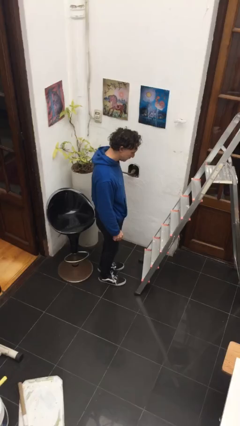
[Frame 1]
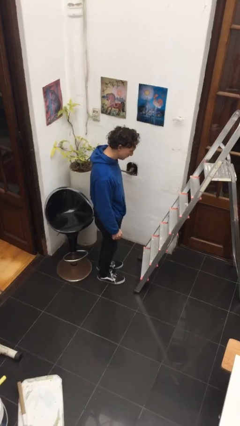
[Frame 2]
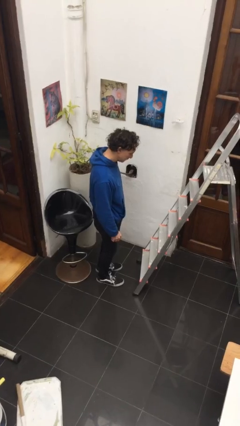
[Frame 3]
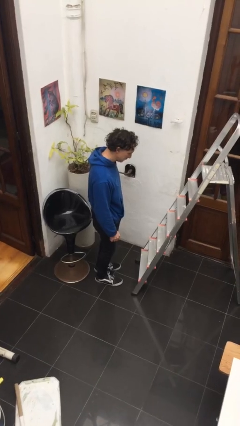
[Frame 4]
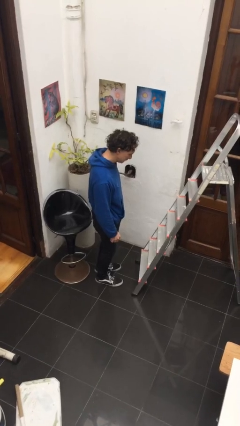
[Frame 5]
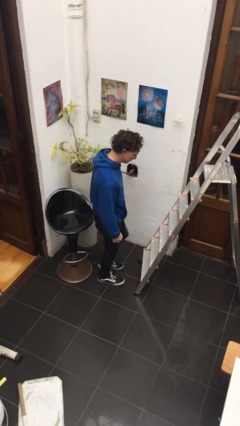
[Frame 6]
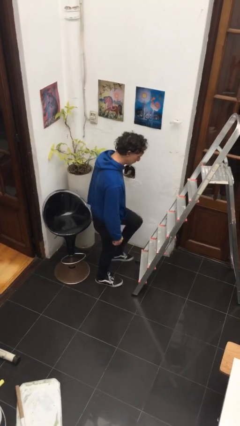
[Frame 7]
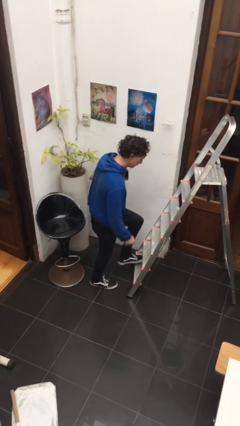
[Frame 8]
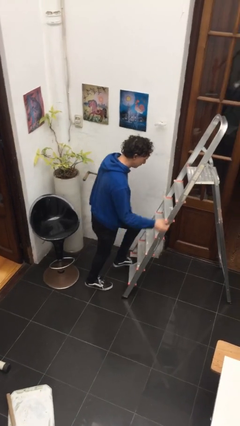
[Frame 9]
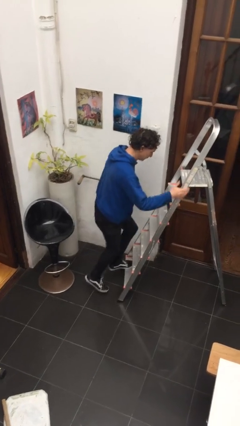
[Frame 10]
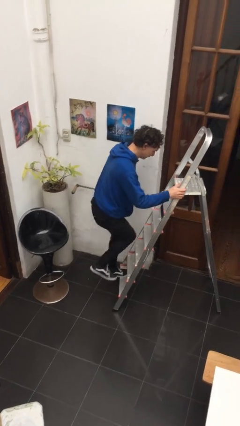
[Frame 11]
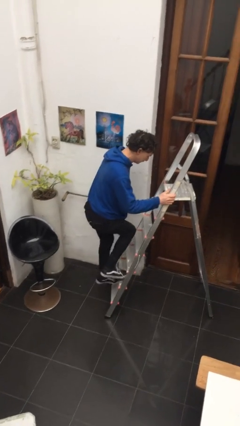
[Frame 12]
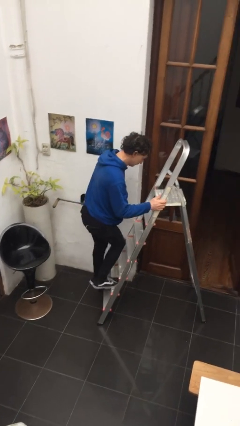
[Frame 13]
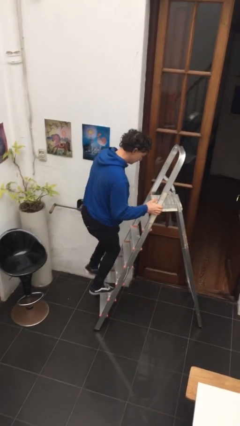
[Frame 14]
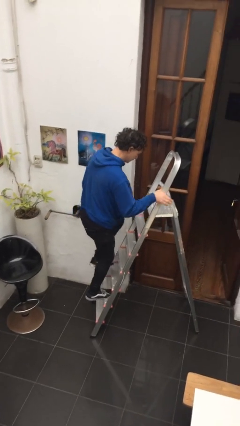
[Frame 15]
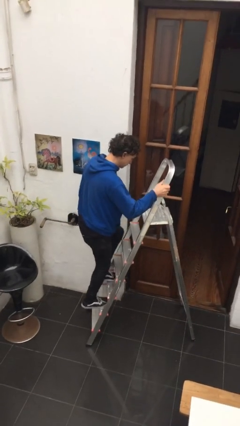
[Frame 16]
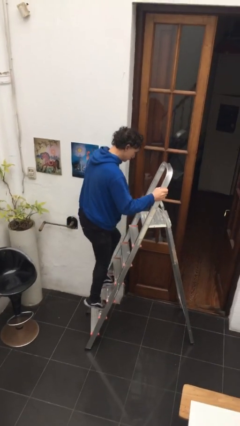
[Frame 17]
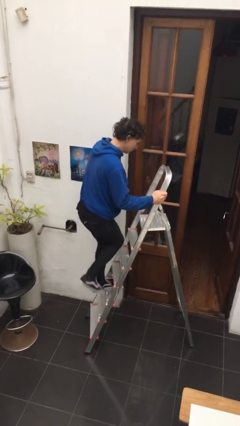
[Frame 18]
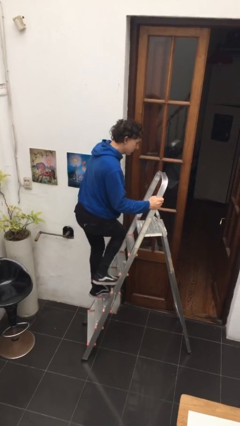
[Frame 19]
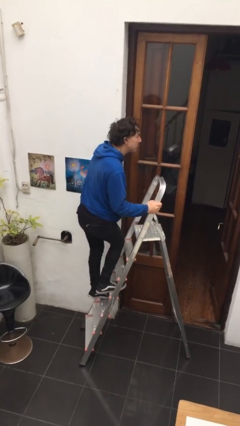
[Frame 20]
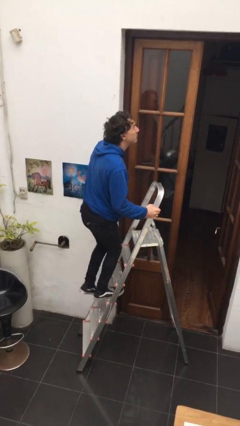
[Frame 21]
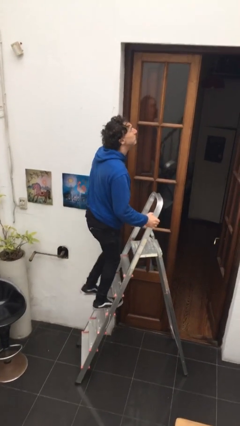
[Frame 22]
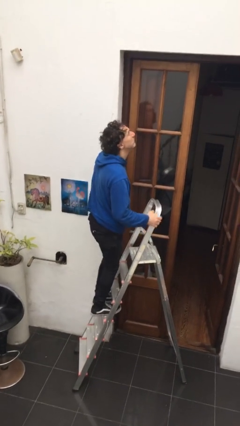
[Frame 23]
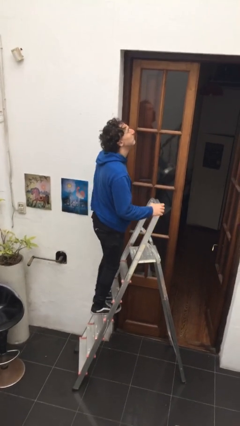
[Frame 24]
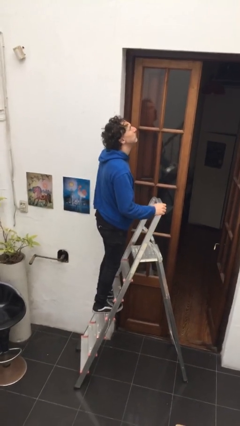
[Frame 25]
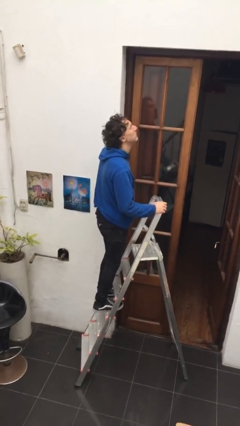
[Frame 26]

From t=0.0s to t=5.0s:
person climbs up ladder

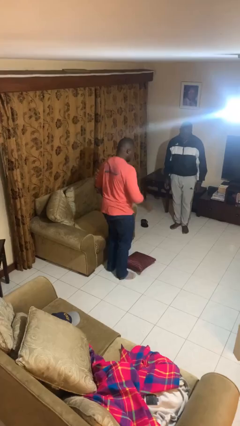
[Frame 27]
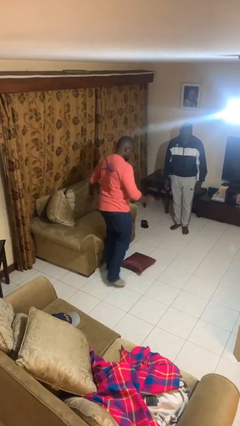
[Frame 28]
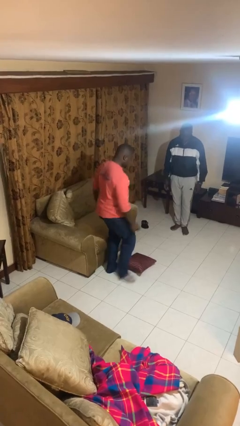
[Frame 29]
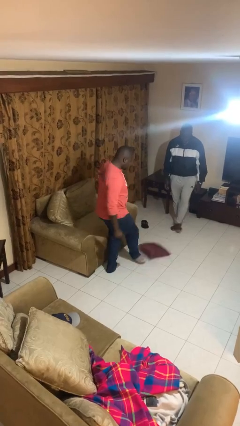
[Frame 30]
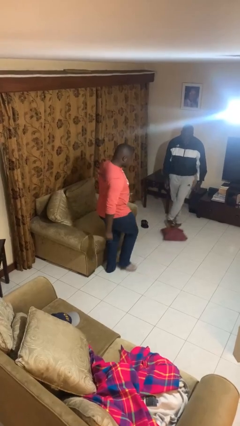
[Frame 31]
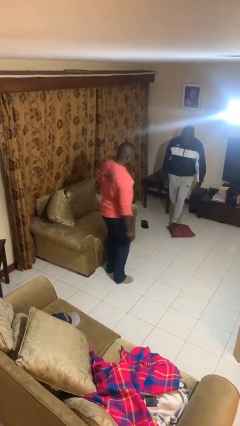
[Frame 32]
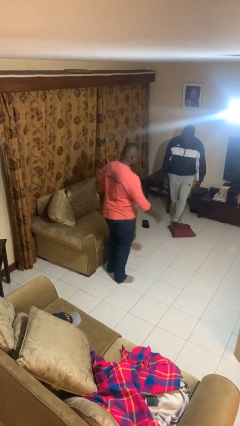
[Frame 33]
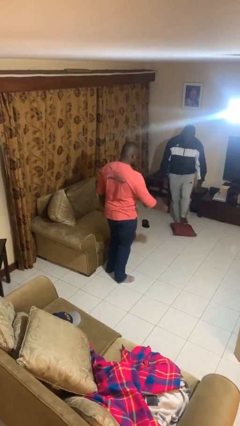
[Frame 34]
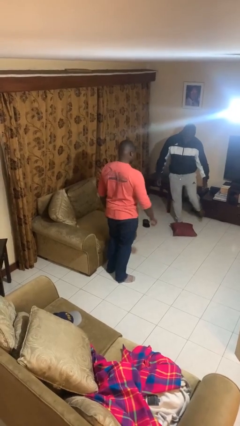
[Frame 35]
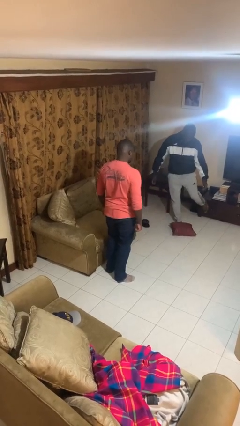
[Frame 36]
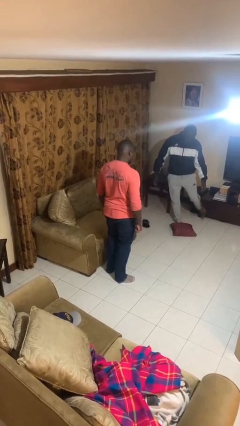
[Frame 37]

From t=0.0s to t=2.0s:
person kicks object to person

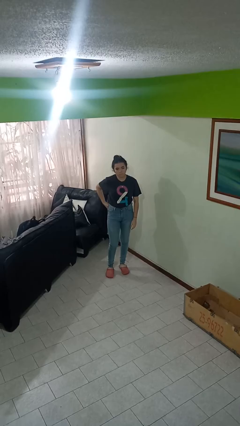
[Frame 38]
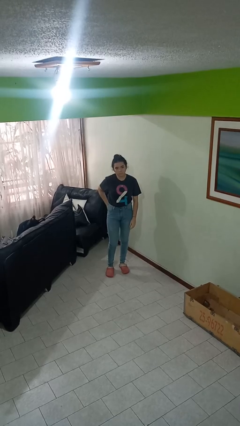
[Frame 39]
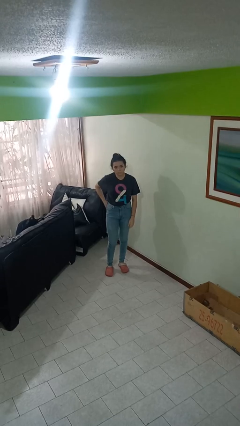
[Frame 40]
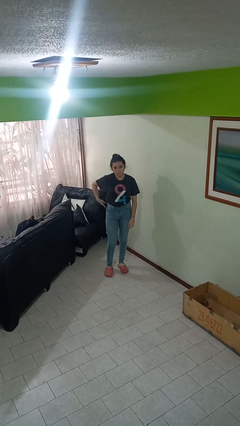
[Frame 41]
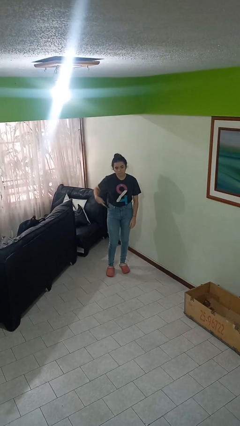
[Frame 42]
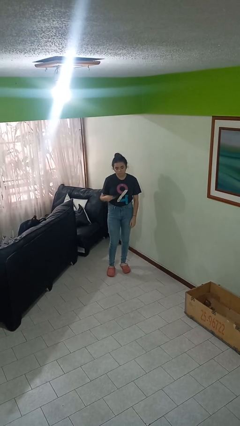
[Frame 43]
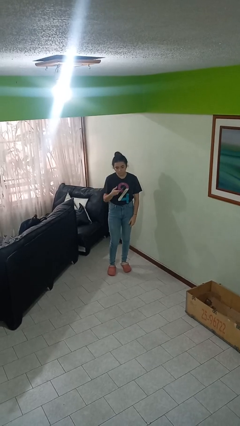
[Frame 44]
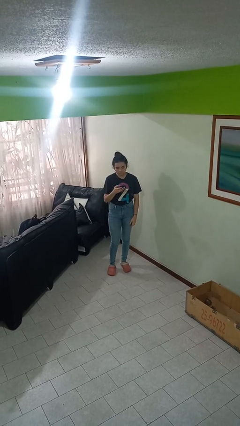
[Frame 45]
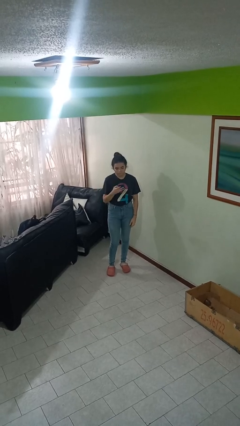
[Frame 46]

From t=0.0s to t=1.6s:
person takes phone from pocket

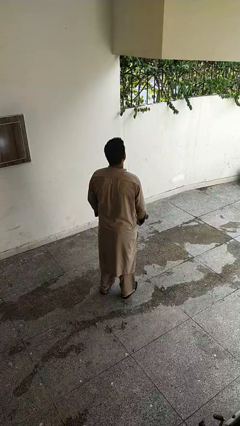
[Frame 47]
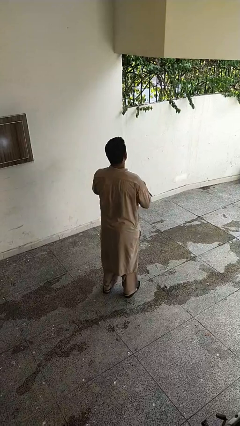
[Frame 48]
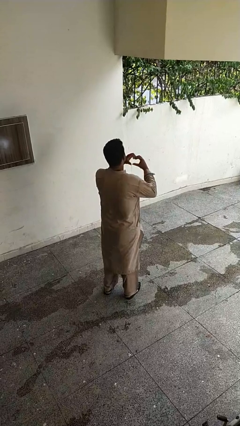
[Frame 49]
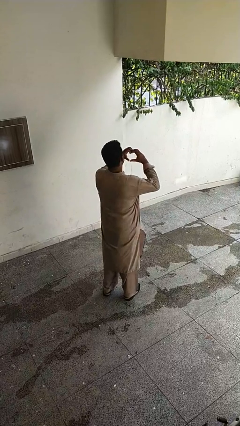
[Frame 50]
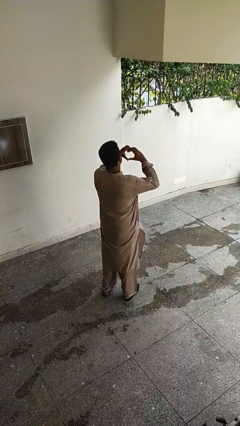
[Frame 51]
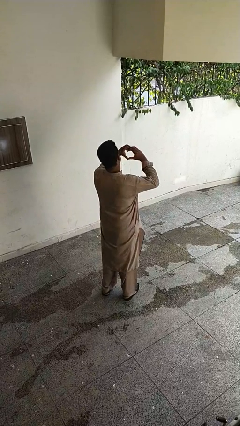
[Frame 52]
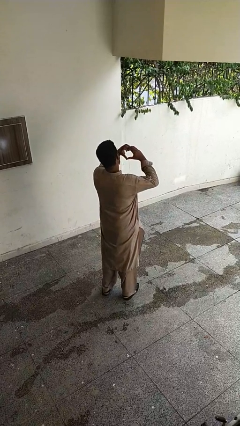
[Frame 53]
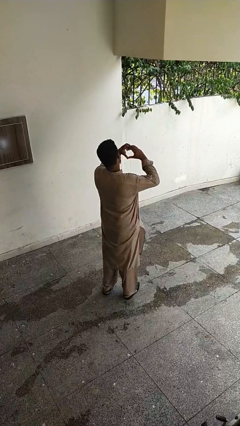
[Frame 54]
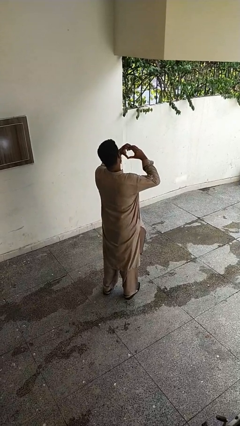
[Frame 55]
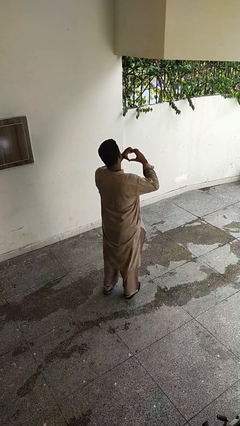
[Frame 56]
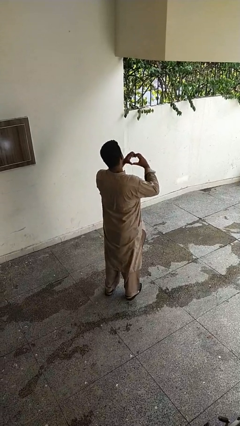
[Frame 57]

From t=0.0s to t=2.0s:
person gestures heart

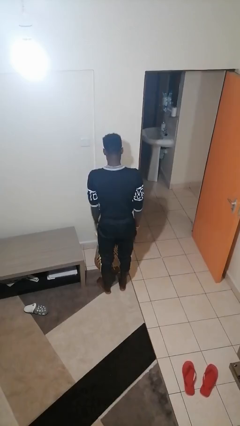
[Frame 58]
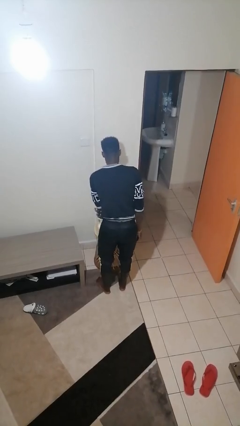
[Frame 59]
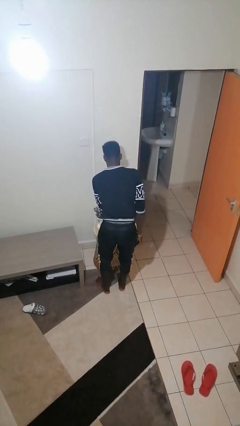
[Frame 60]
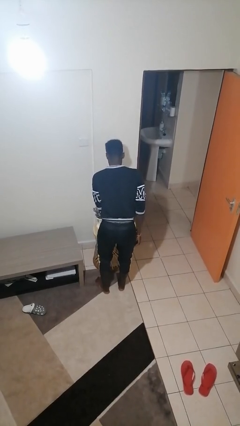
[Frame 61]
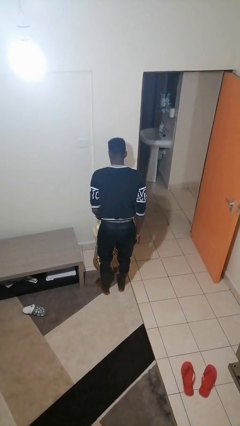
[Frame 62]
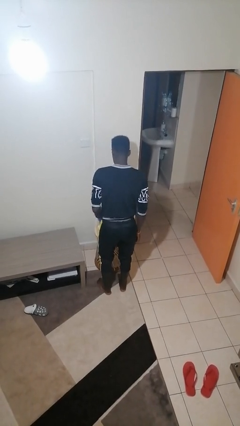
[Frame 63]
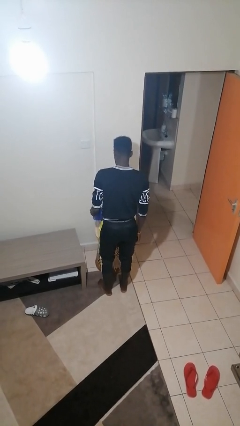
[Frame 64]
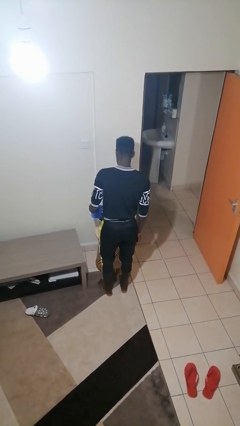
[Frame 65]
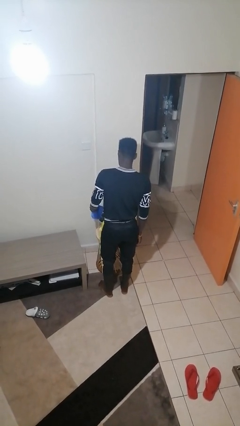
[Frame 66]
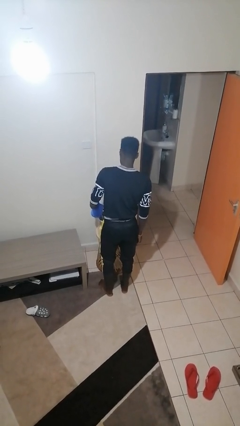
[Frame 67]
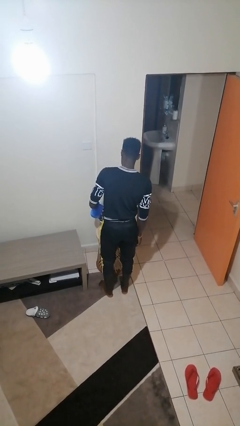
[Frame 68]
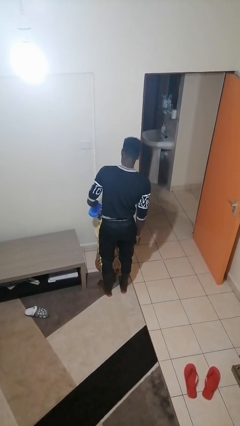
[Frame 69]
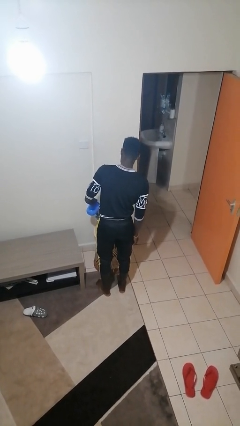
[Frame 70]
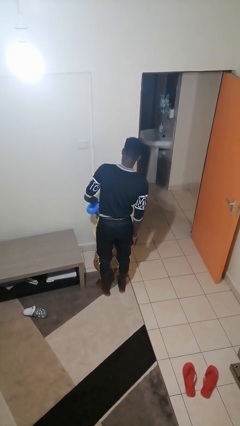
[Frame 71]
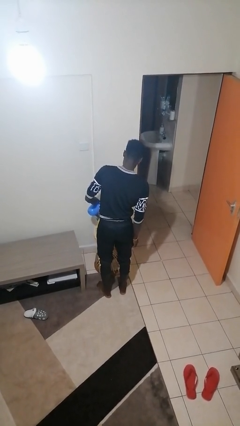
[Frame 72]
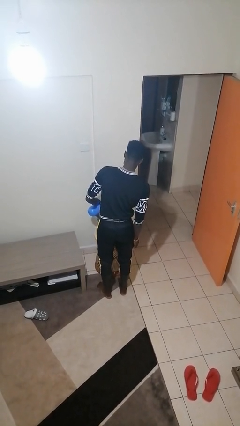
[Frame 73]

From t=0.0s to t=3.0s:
person waters houseplant

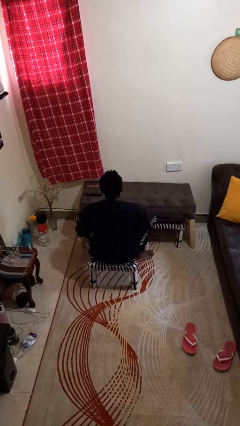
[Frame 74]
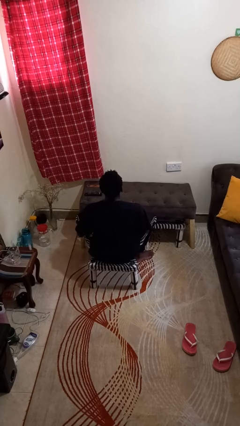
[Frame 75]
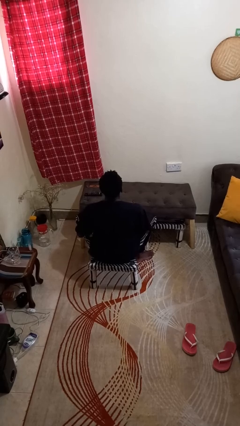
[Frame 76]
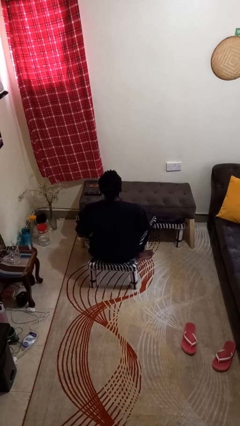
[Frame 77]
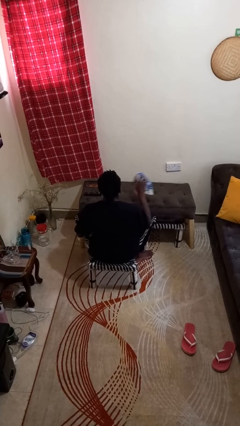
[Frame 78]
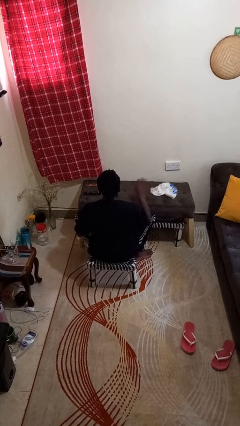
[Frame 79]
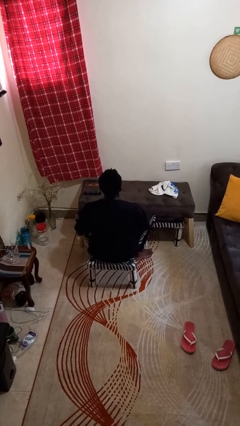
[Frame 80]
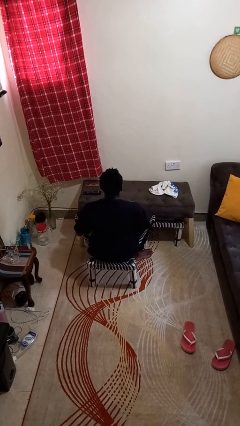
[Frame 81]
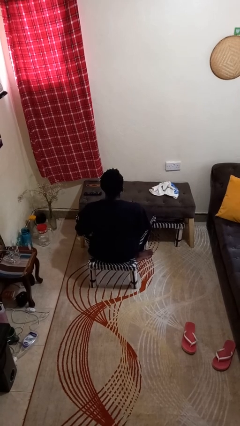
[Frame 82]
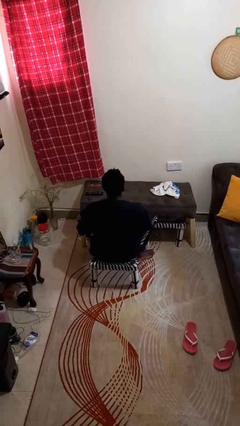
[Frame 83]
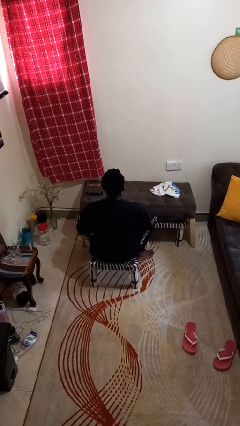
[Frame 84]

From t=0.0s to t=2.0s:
person throws object on table

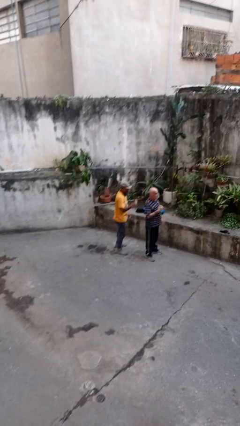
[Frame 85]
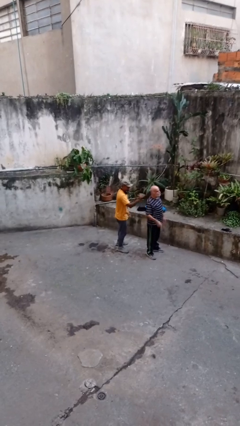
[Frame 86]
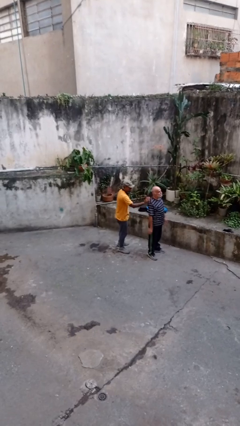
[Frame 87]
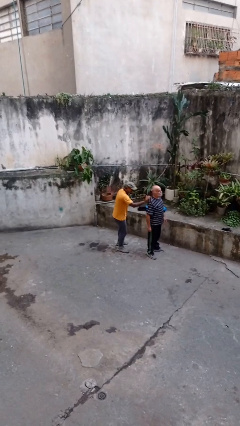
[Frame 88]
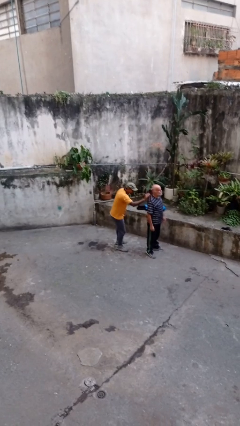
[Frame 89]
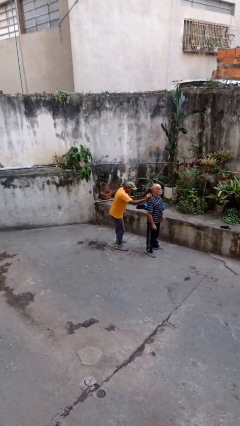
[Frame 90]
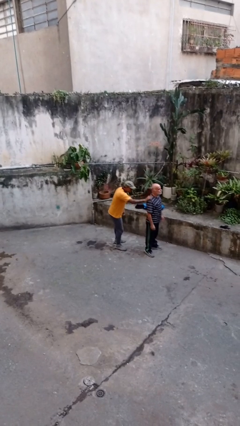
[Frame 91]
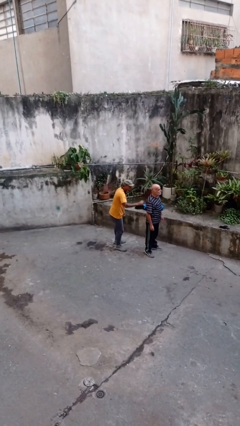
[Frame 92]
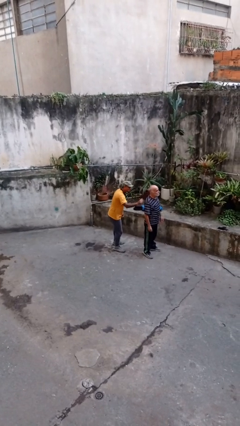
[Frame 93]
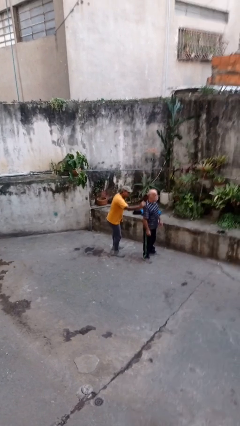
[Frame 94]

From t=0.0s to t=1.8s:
person grabs person by shoulder
